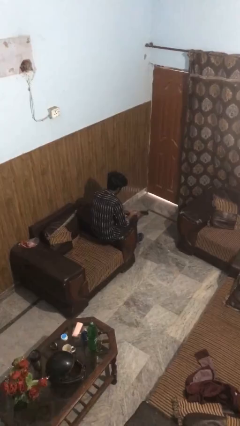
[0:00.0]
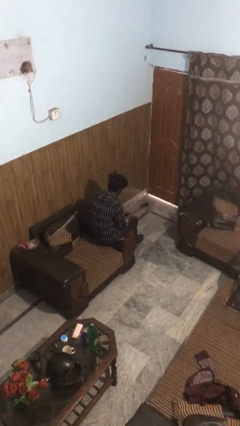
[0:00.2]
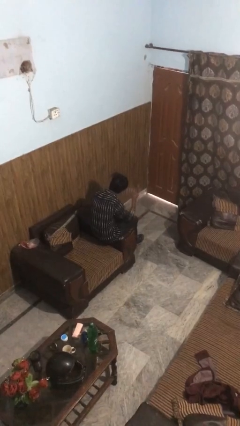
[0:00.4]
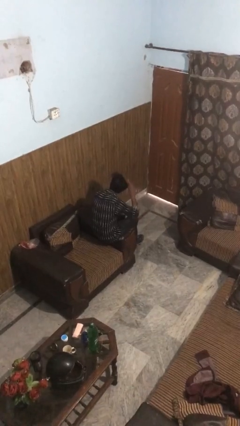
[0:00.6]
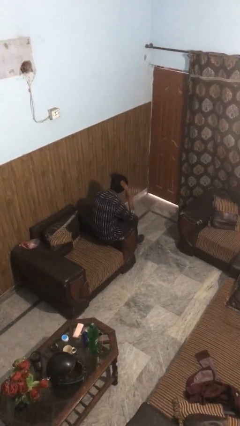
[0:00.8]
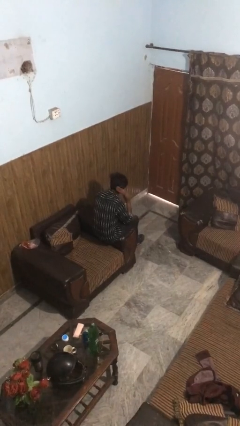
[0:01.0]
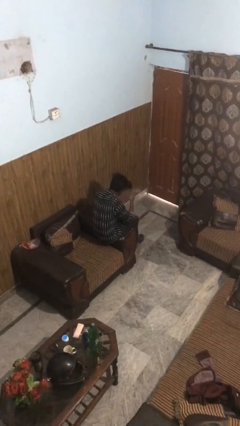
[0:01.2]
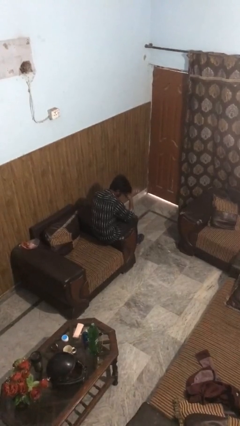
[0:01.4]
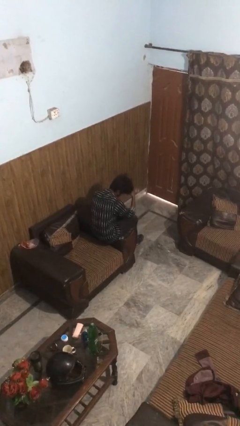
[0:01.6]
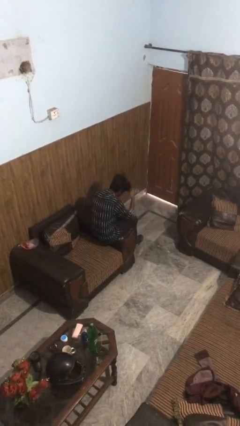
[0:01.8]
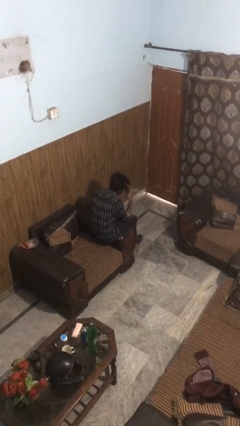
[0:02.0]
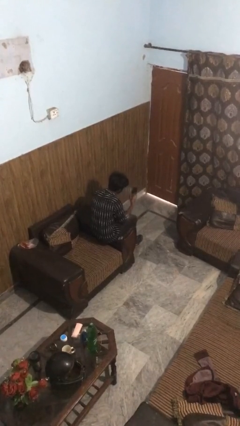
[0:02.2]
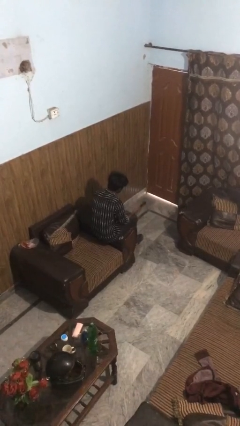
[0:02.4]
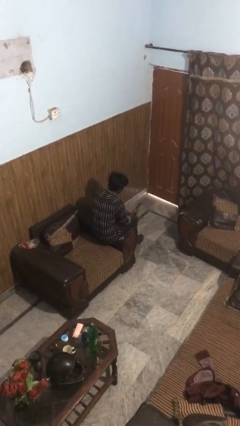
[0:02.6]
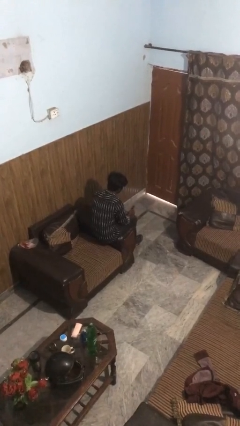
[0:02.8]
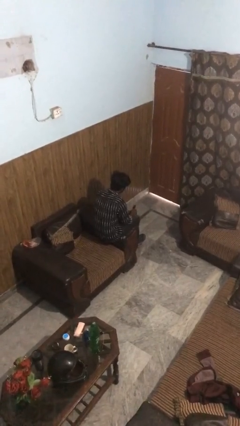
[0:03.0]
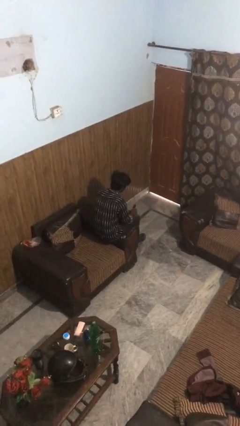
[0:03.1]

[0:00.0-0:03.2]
person brushes hair

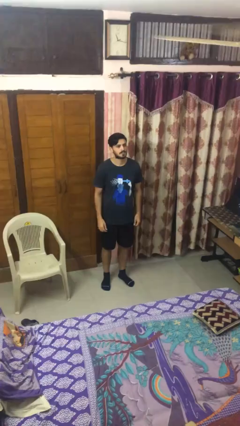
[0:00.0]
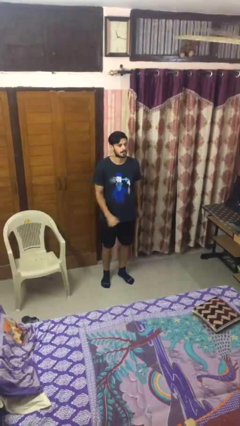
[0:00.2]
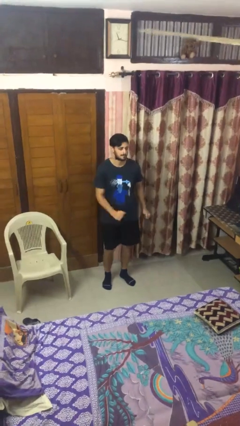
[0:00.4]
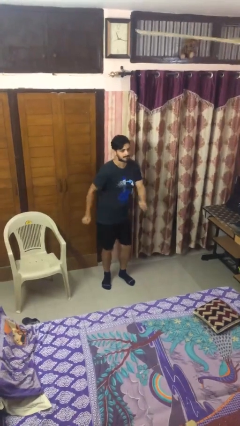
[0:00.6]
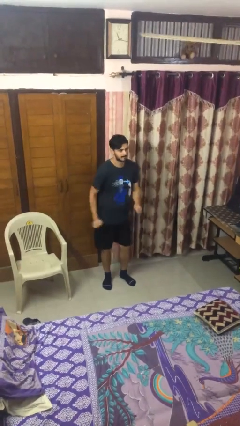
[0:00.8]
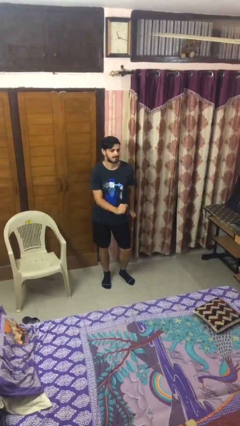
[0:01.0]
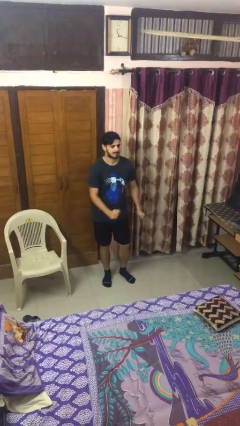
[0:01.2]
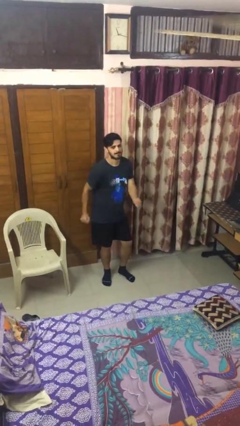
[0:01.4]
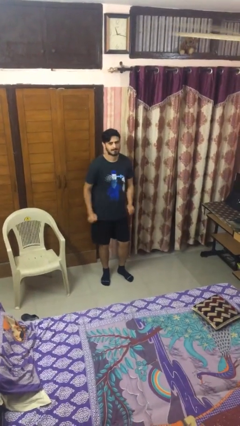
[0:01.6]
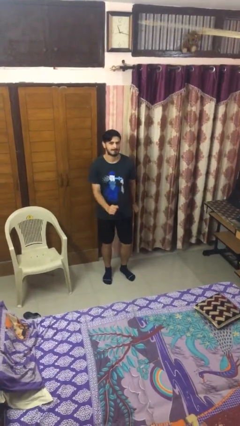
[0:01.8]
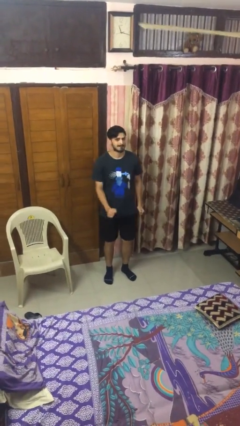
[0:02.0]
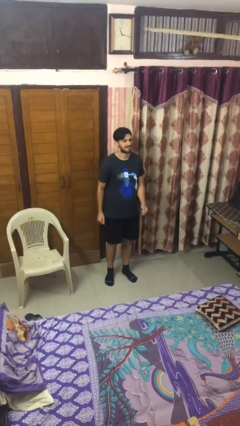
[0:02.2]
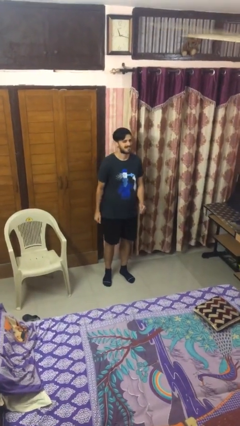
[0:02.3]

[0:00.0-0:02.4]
person dances in place

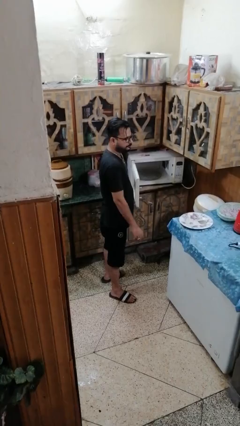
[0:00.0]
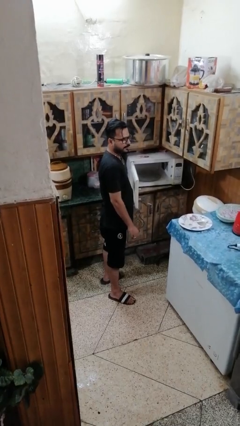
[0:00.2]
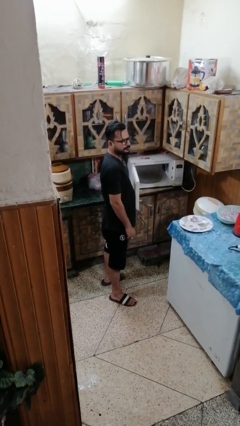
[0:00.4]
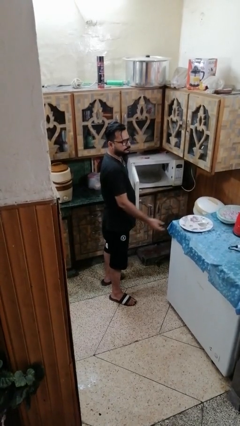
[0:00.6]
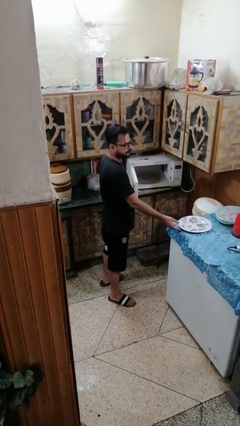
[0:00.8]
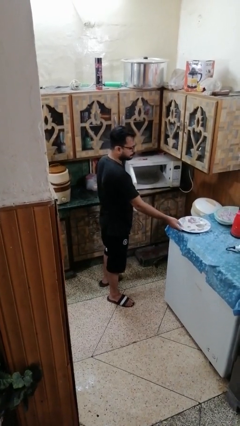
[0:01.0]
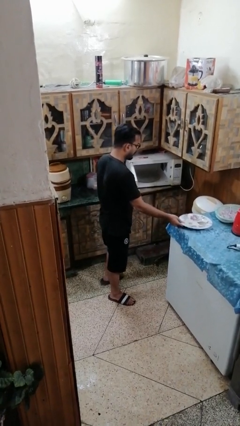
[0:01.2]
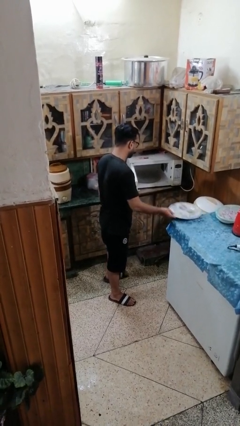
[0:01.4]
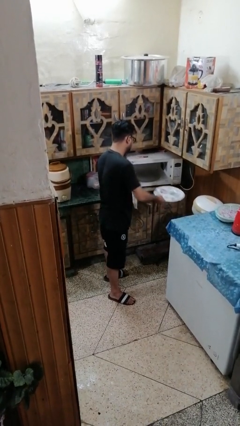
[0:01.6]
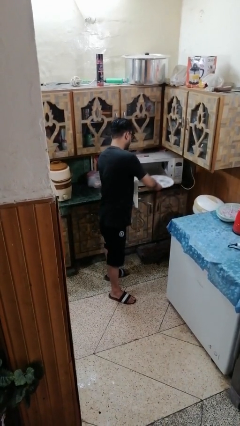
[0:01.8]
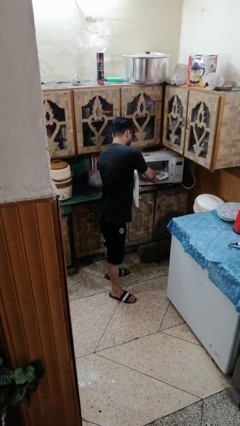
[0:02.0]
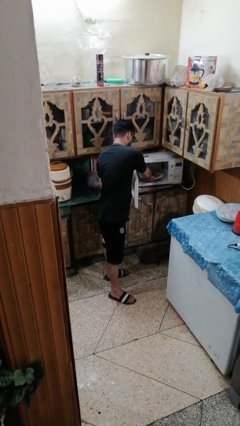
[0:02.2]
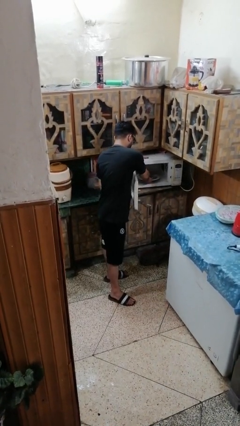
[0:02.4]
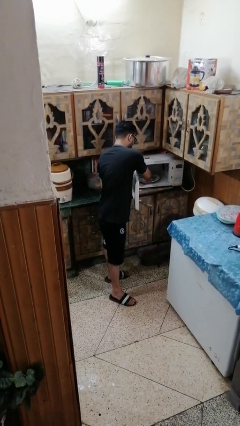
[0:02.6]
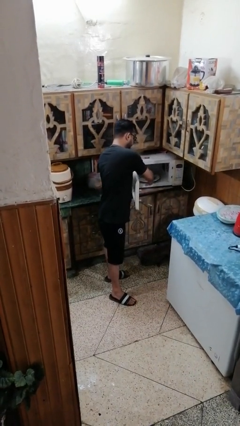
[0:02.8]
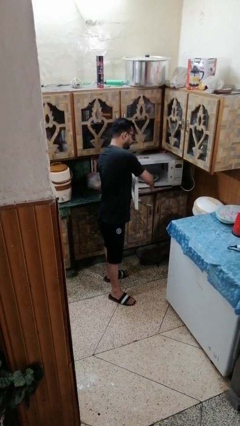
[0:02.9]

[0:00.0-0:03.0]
person puts object into microwave

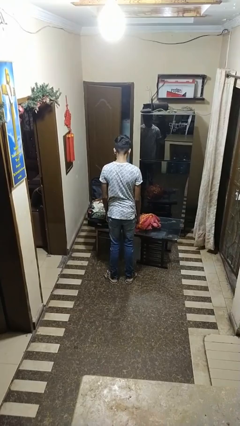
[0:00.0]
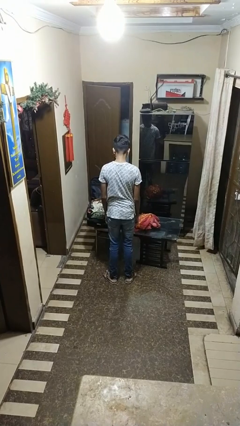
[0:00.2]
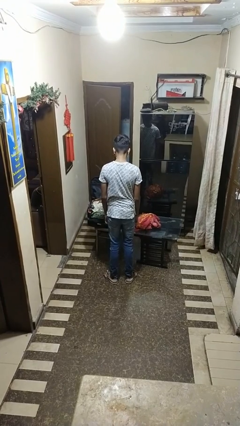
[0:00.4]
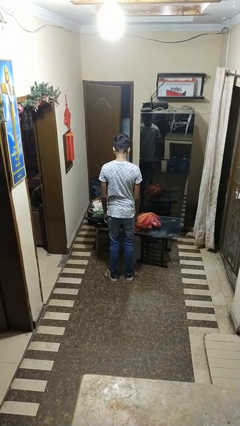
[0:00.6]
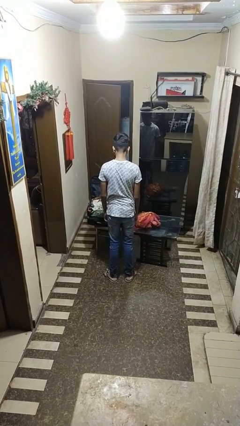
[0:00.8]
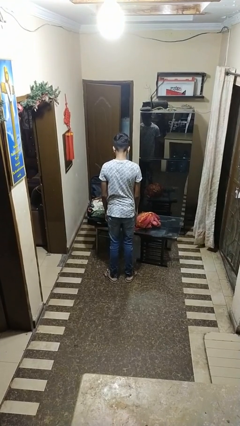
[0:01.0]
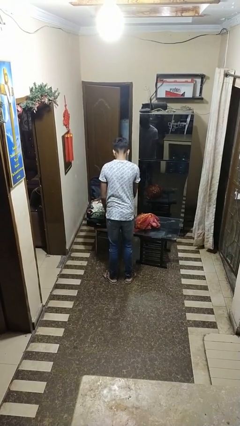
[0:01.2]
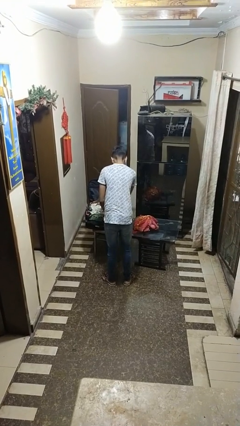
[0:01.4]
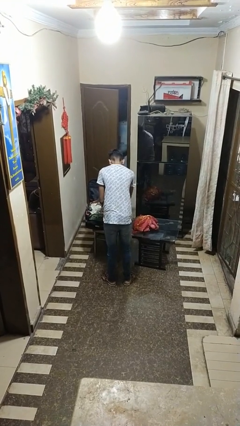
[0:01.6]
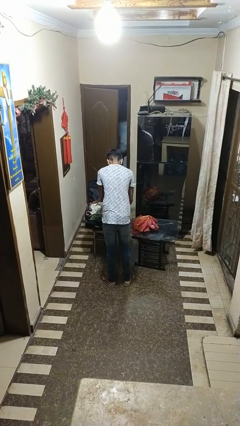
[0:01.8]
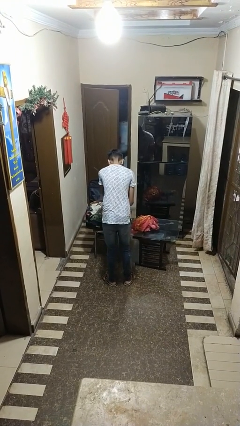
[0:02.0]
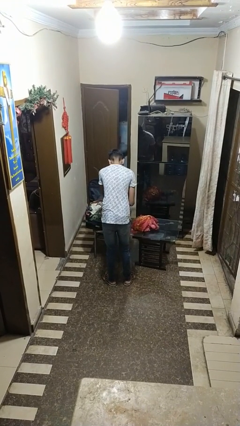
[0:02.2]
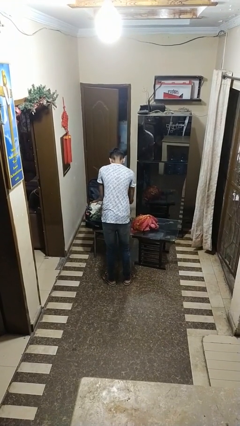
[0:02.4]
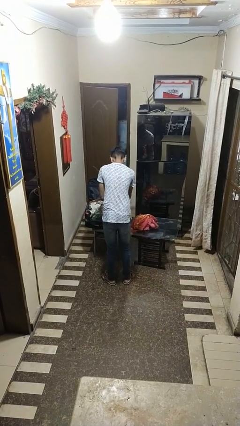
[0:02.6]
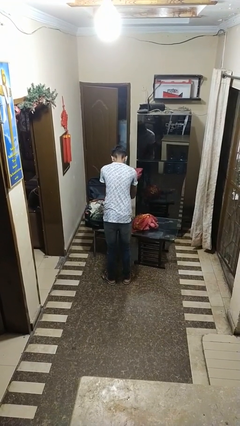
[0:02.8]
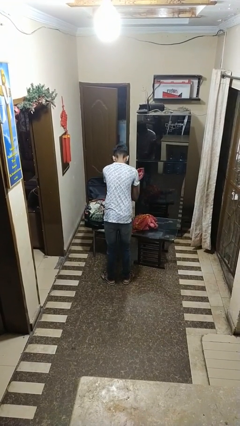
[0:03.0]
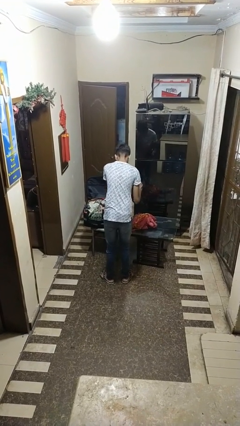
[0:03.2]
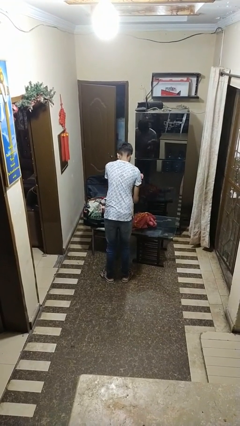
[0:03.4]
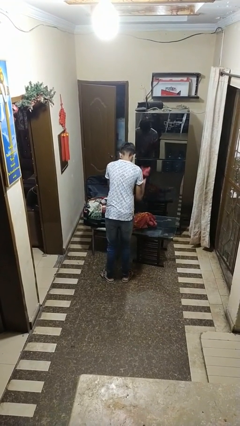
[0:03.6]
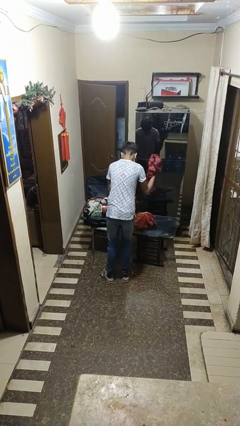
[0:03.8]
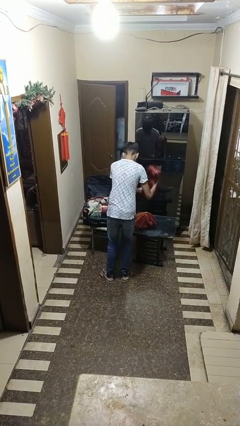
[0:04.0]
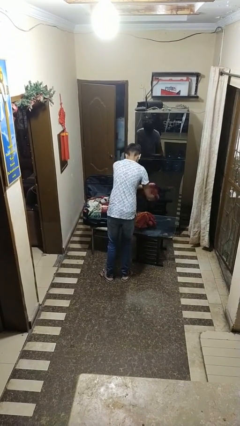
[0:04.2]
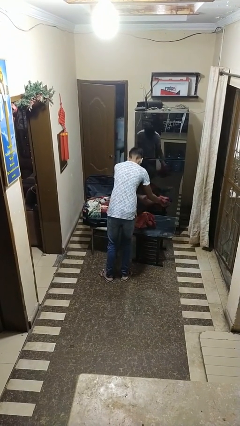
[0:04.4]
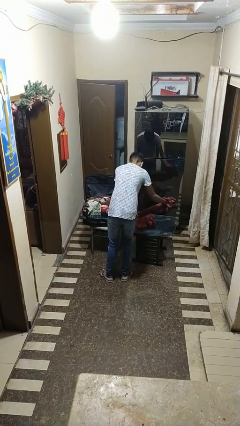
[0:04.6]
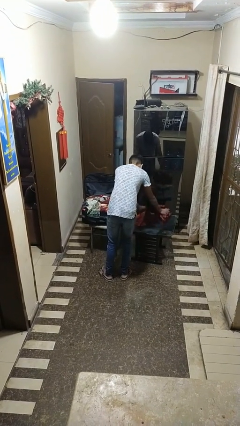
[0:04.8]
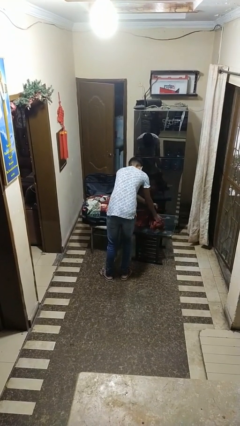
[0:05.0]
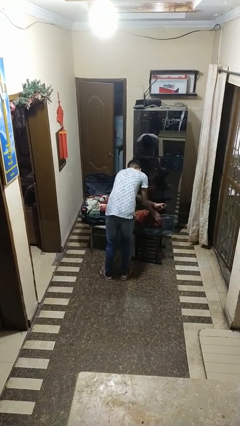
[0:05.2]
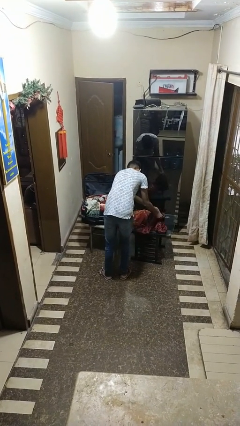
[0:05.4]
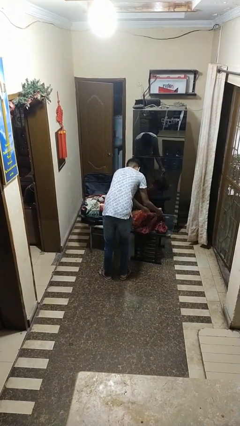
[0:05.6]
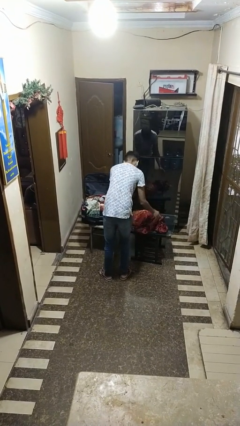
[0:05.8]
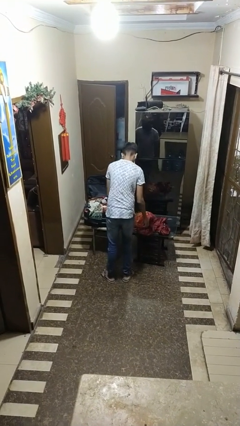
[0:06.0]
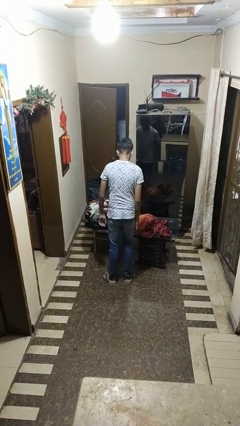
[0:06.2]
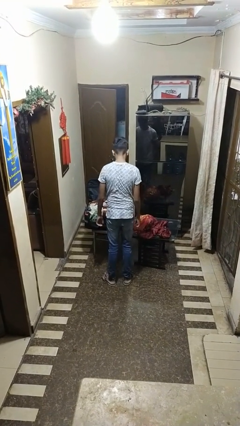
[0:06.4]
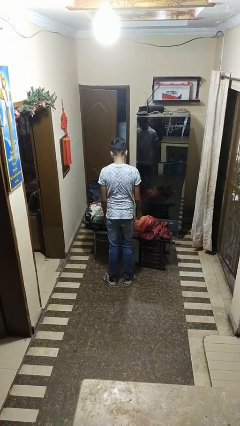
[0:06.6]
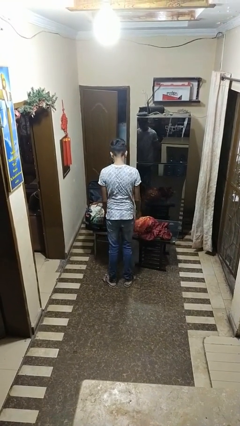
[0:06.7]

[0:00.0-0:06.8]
person unloads clothes from suitcase

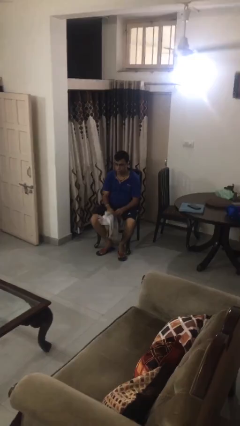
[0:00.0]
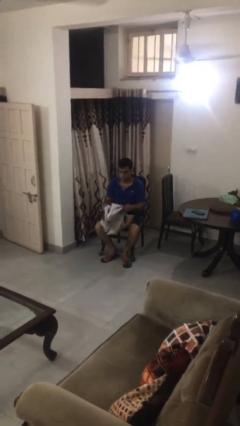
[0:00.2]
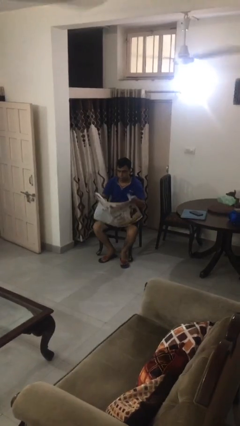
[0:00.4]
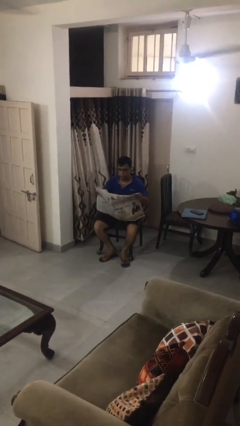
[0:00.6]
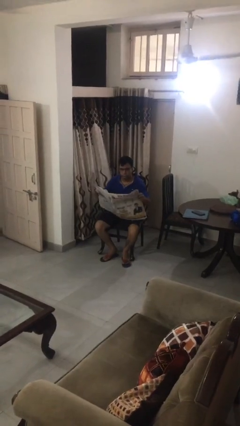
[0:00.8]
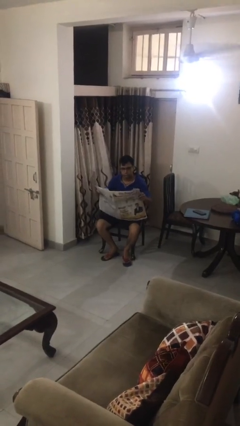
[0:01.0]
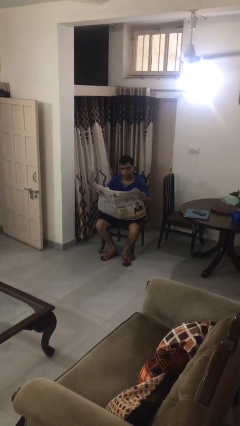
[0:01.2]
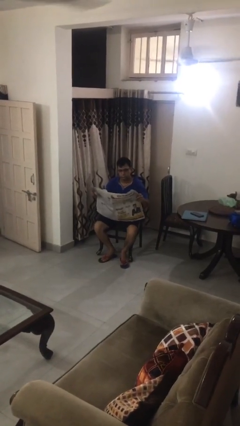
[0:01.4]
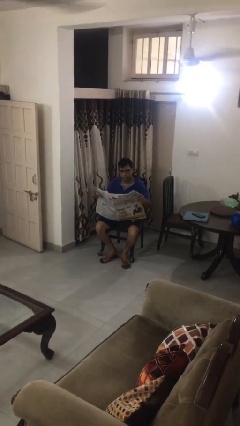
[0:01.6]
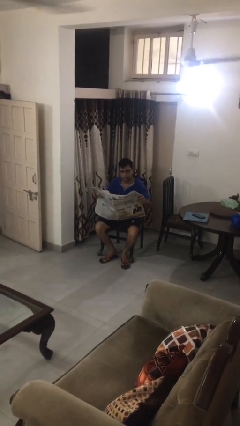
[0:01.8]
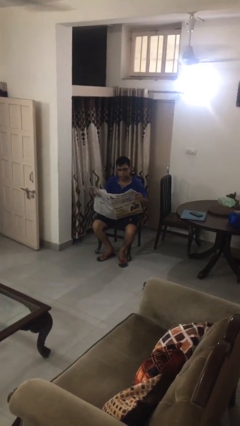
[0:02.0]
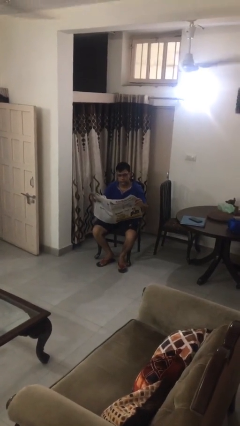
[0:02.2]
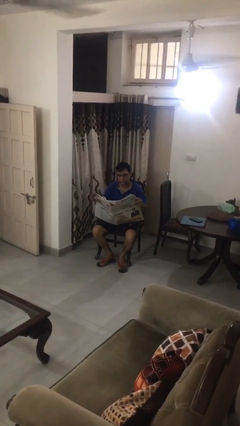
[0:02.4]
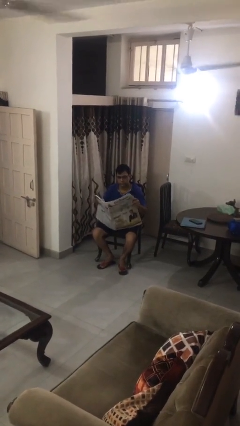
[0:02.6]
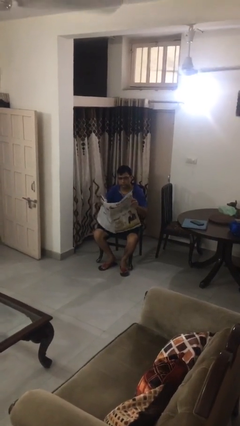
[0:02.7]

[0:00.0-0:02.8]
person reads newspaper
